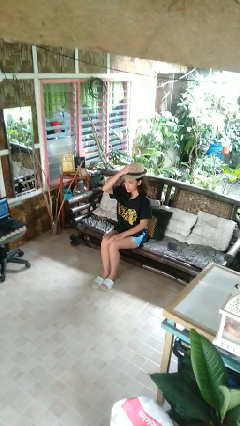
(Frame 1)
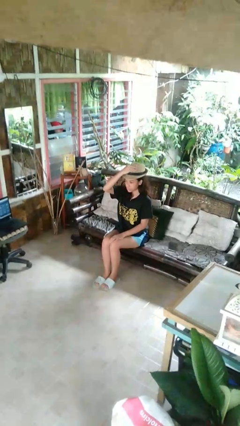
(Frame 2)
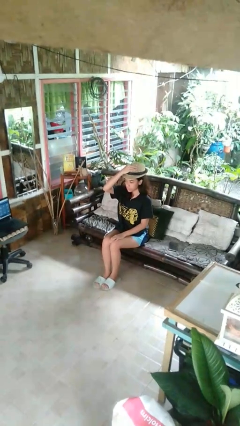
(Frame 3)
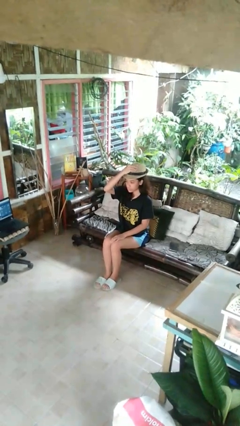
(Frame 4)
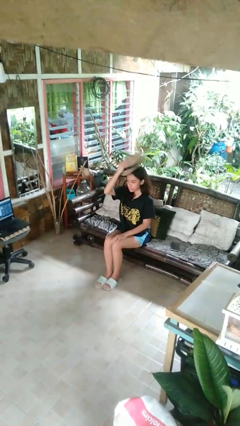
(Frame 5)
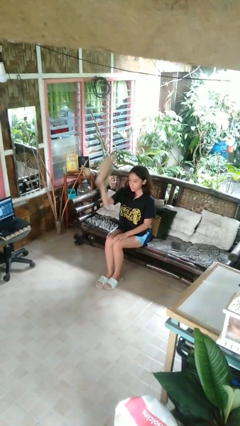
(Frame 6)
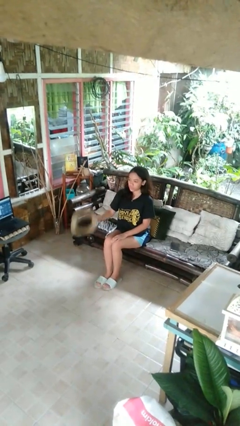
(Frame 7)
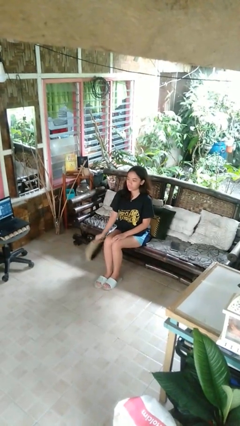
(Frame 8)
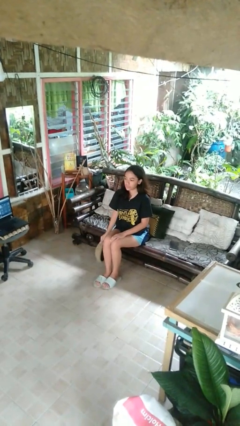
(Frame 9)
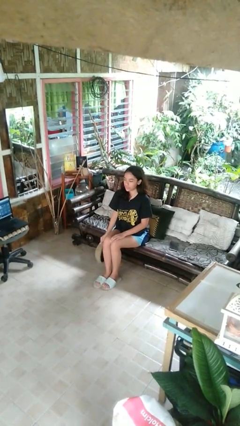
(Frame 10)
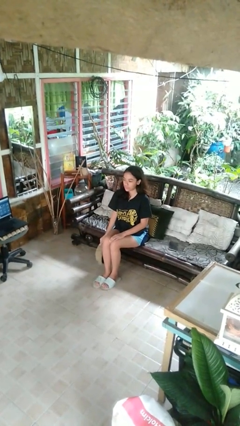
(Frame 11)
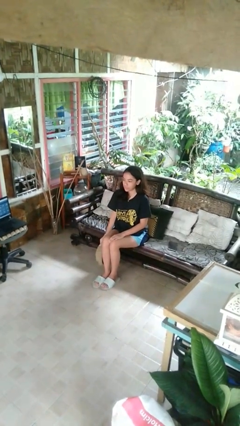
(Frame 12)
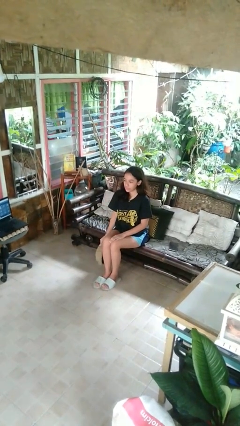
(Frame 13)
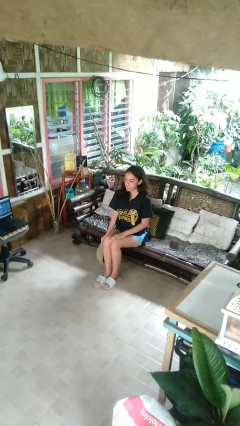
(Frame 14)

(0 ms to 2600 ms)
person takes off hat

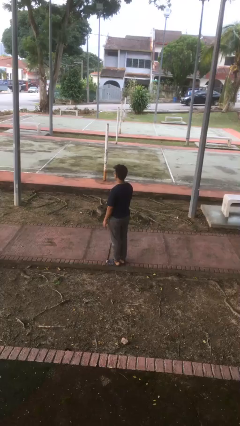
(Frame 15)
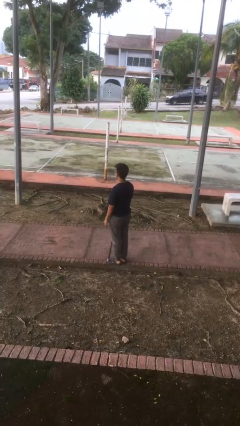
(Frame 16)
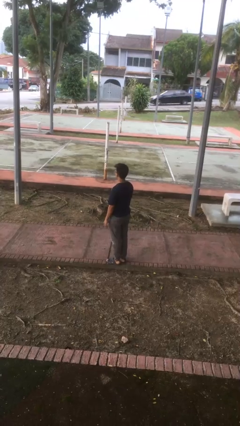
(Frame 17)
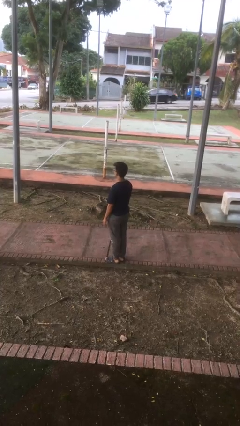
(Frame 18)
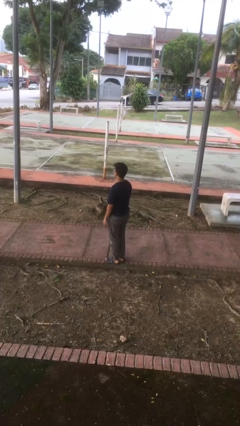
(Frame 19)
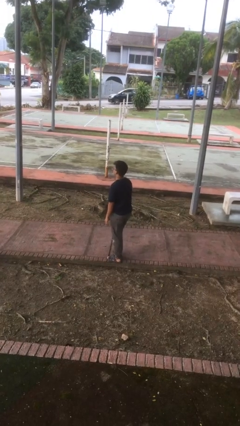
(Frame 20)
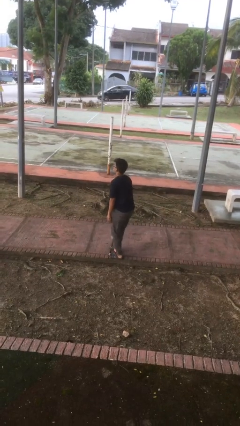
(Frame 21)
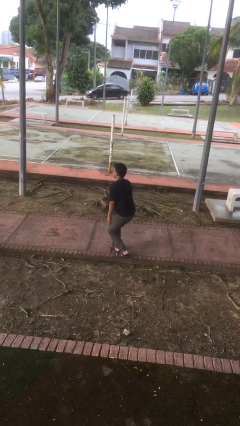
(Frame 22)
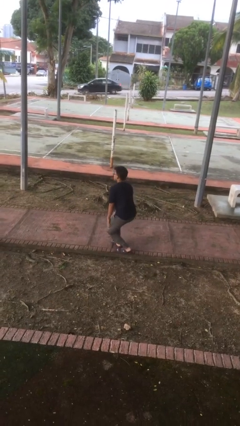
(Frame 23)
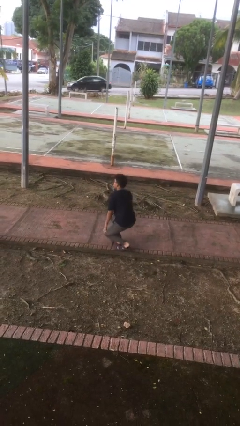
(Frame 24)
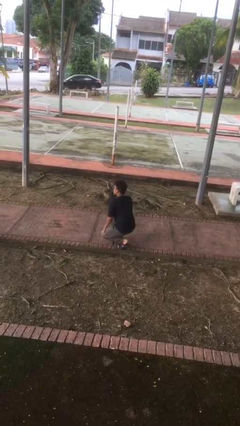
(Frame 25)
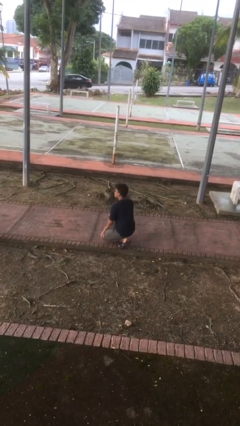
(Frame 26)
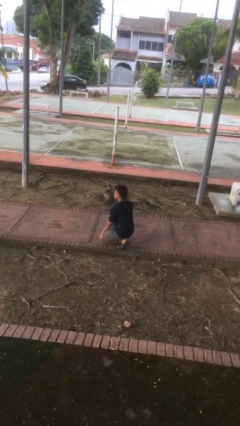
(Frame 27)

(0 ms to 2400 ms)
person kneels

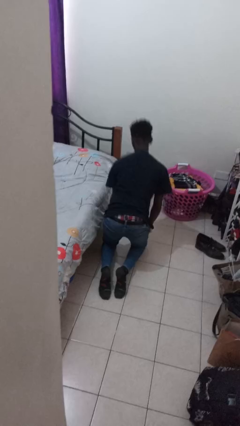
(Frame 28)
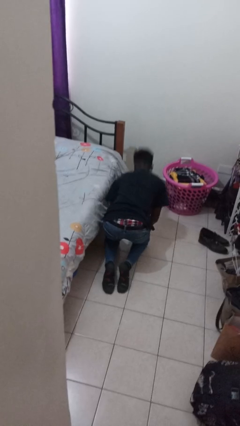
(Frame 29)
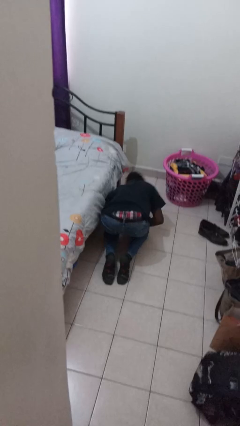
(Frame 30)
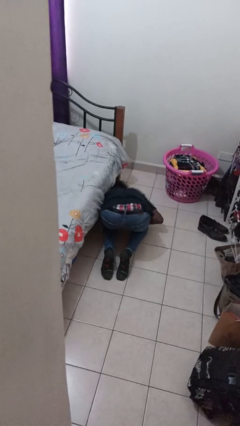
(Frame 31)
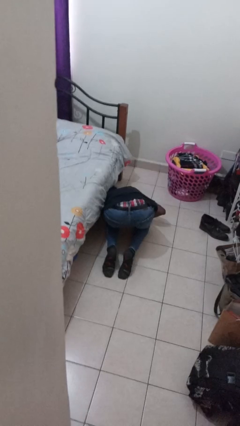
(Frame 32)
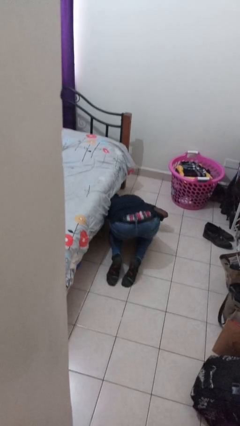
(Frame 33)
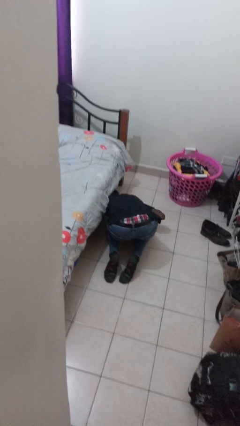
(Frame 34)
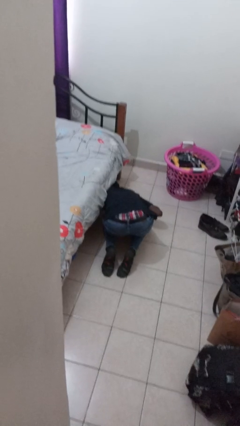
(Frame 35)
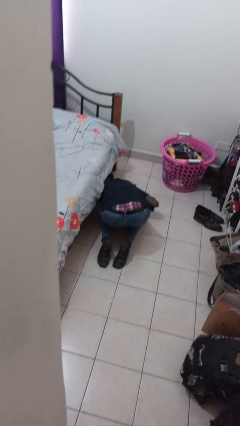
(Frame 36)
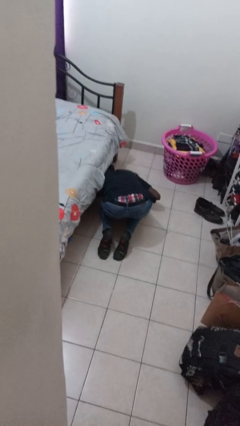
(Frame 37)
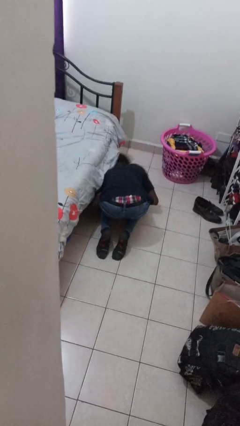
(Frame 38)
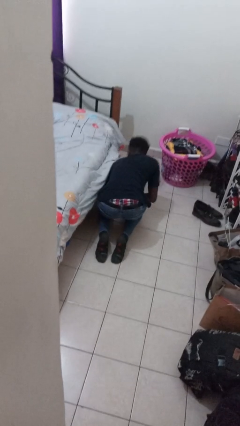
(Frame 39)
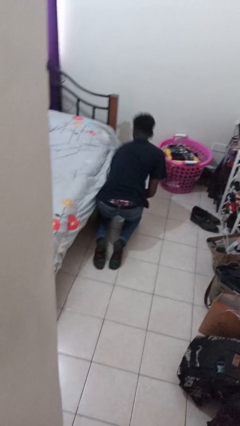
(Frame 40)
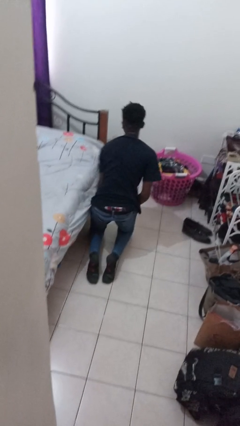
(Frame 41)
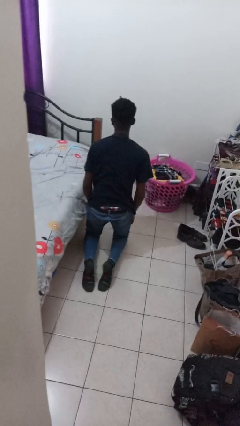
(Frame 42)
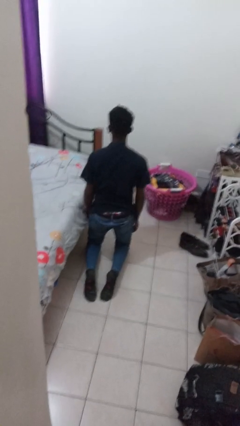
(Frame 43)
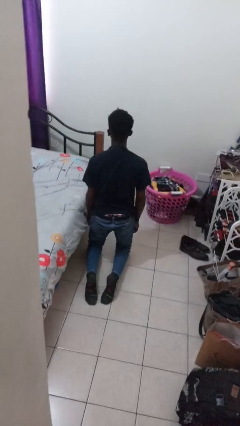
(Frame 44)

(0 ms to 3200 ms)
person searches under bed

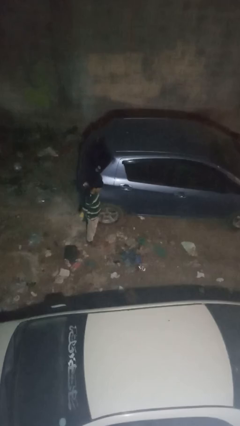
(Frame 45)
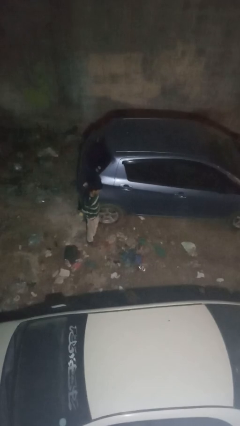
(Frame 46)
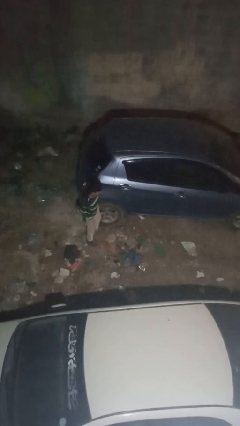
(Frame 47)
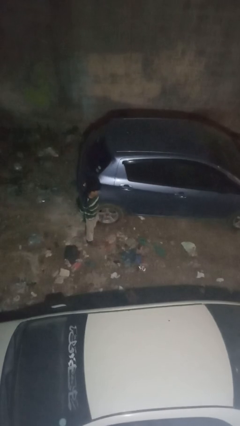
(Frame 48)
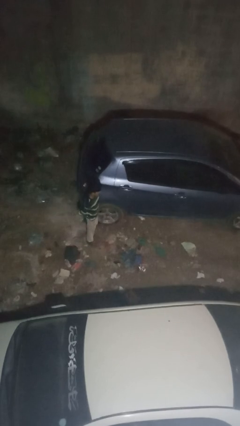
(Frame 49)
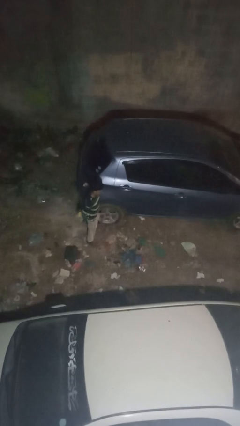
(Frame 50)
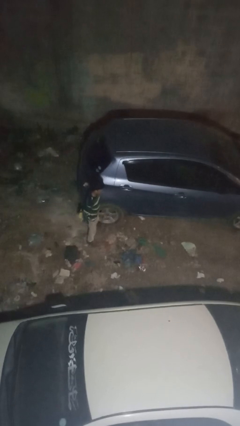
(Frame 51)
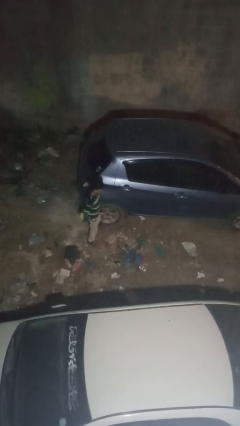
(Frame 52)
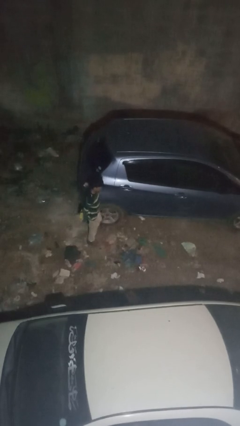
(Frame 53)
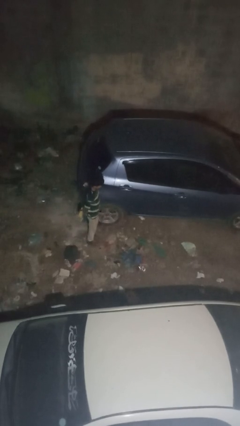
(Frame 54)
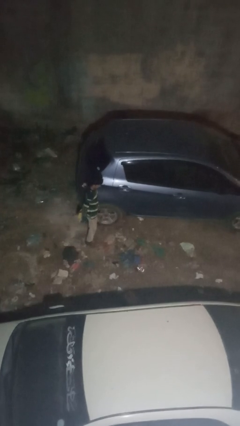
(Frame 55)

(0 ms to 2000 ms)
person kicks car tires

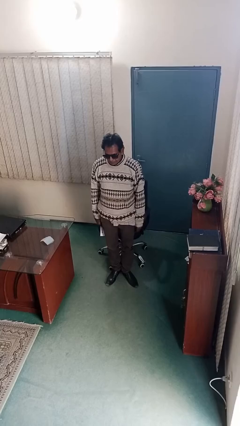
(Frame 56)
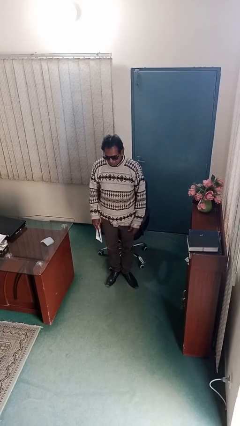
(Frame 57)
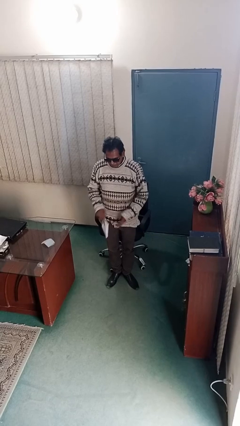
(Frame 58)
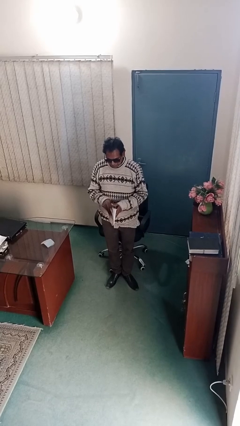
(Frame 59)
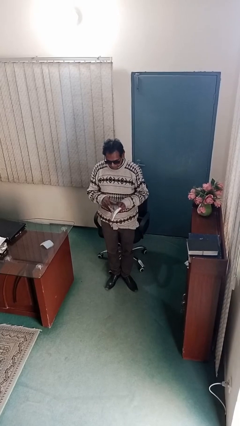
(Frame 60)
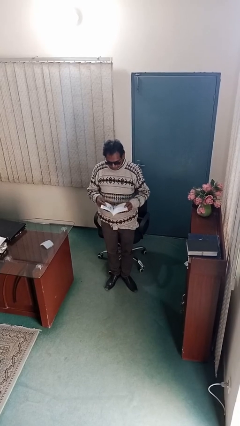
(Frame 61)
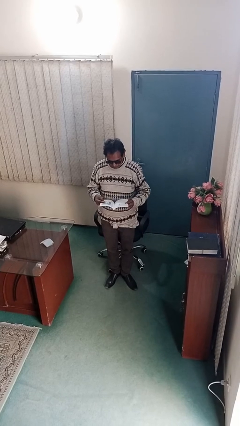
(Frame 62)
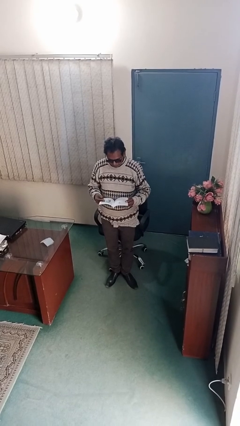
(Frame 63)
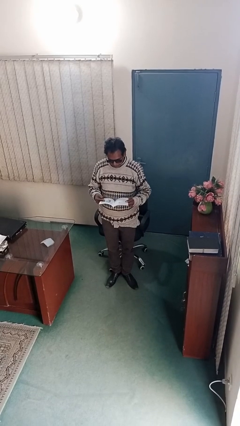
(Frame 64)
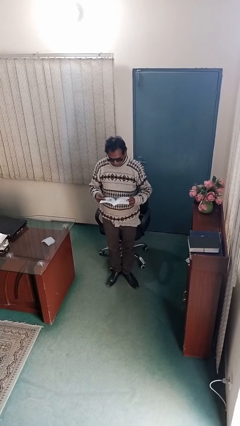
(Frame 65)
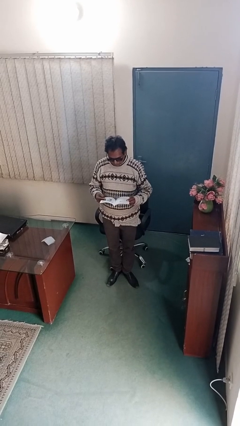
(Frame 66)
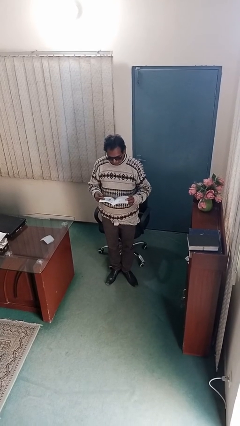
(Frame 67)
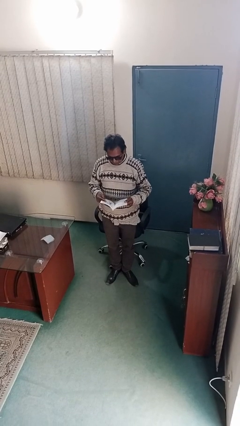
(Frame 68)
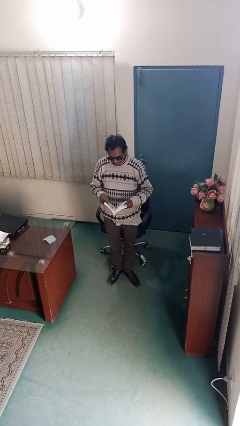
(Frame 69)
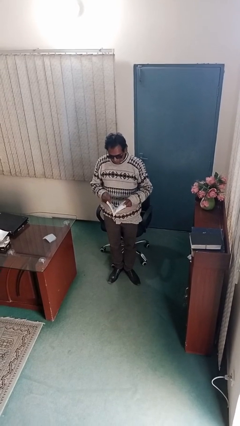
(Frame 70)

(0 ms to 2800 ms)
person reads document

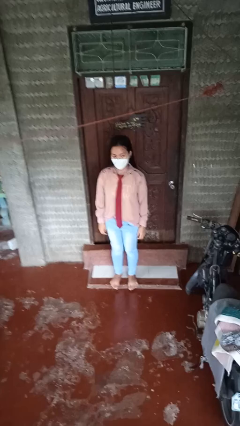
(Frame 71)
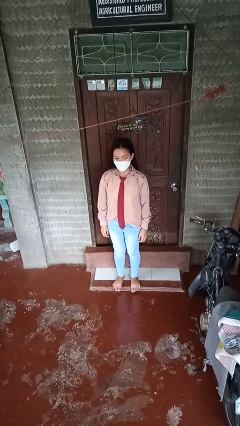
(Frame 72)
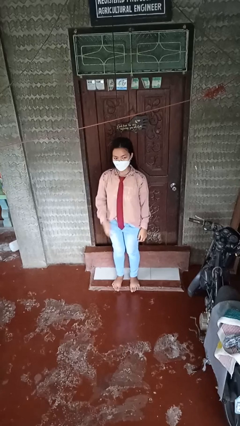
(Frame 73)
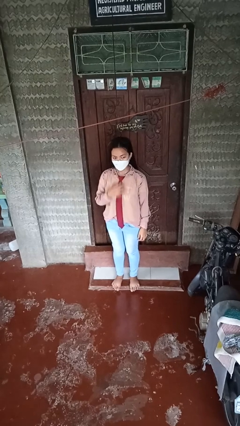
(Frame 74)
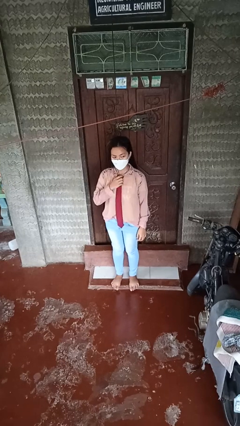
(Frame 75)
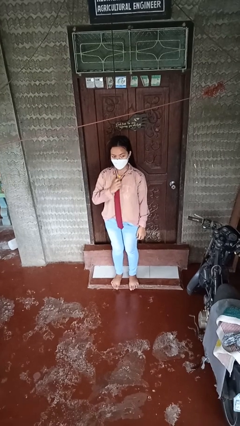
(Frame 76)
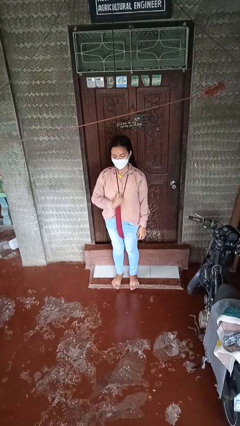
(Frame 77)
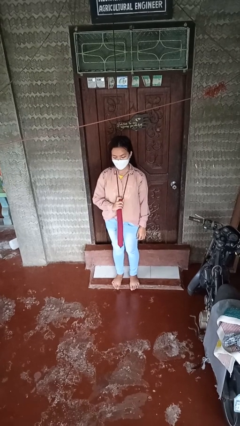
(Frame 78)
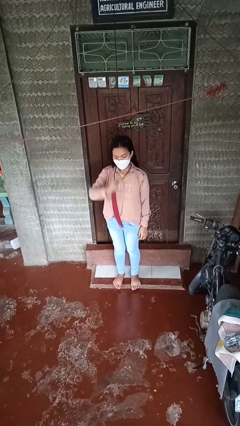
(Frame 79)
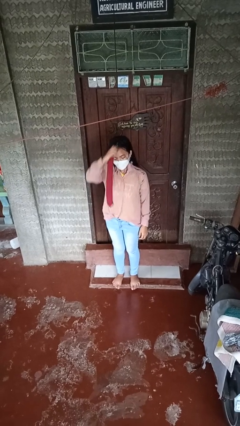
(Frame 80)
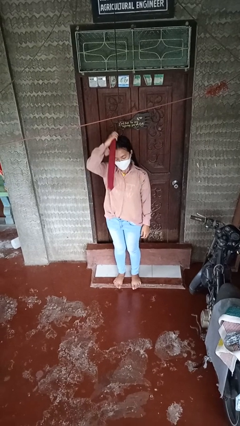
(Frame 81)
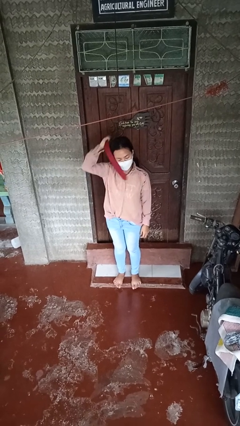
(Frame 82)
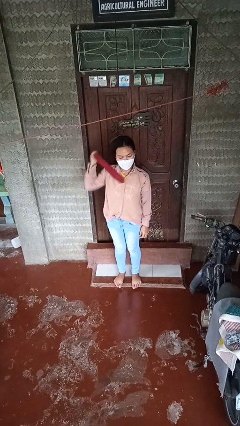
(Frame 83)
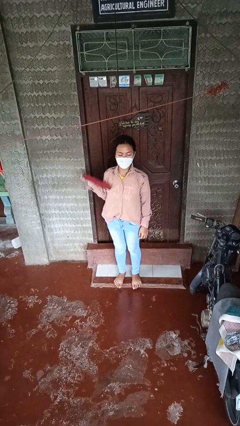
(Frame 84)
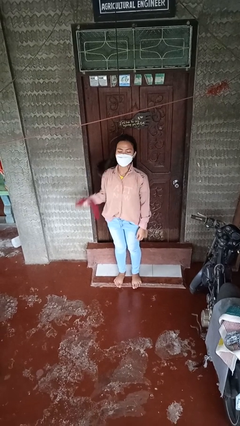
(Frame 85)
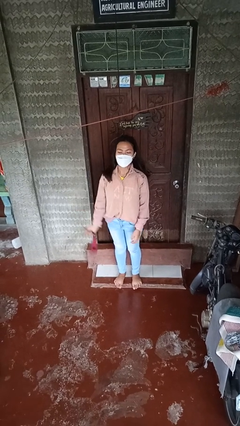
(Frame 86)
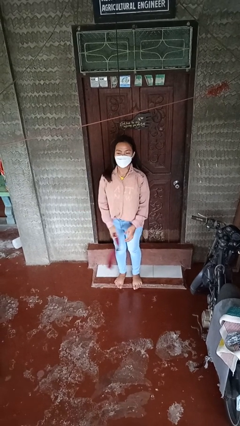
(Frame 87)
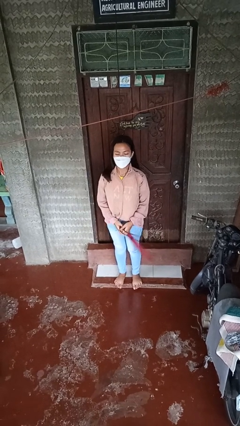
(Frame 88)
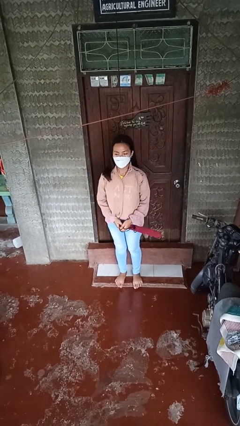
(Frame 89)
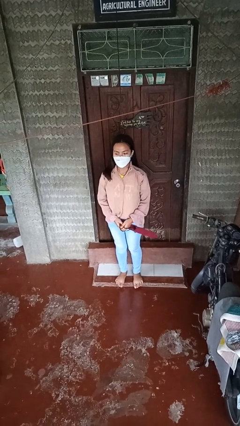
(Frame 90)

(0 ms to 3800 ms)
person takes off necktie

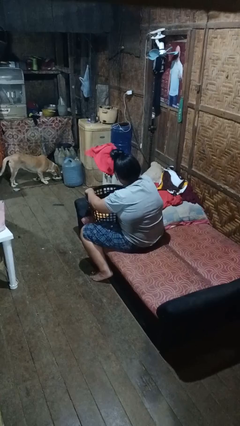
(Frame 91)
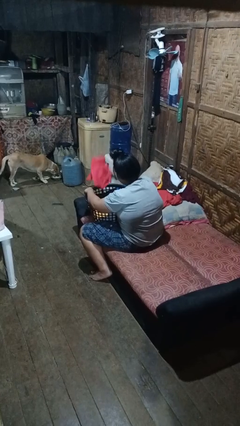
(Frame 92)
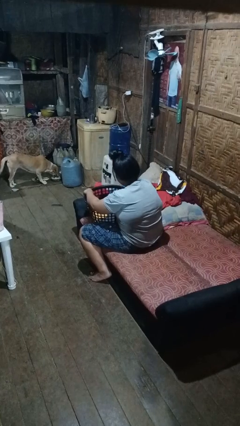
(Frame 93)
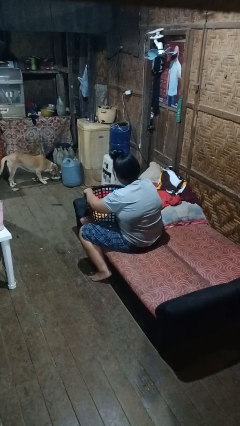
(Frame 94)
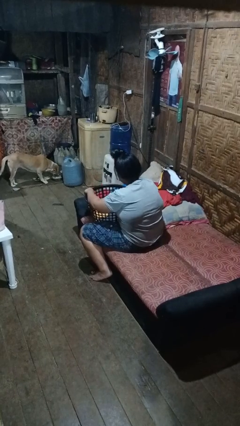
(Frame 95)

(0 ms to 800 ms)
person takes object from basket
